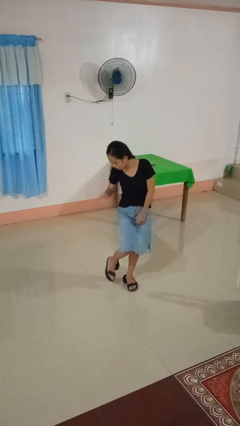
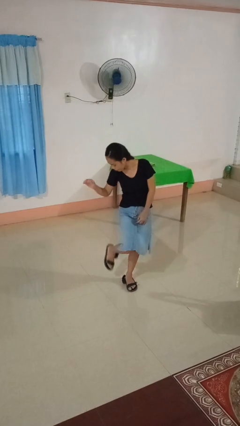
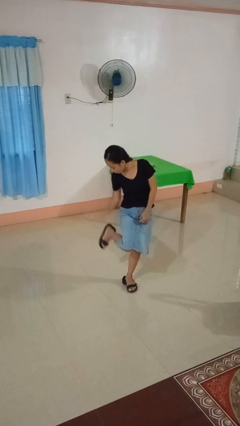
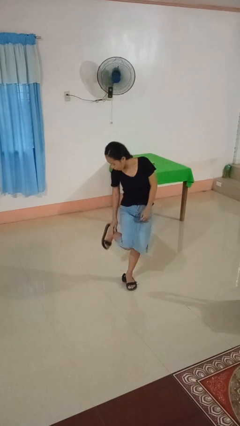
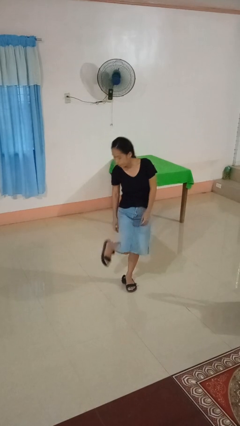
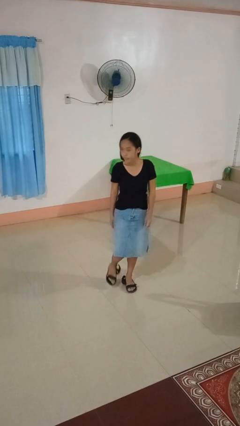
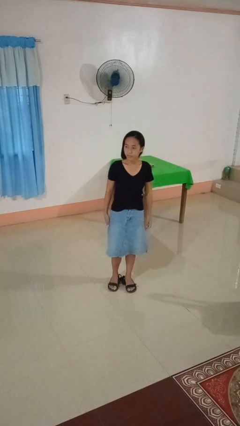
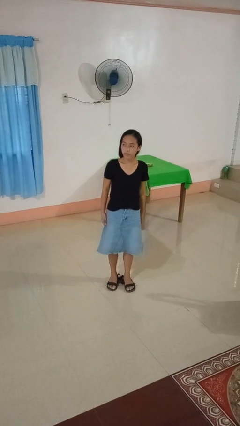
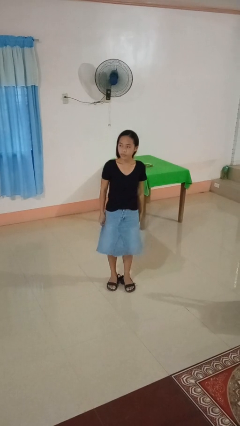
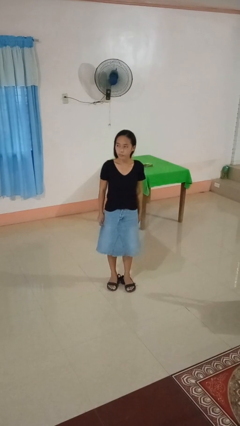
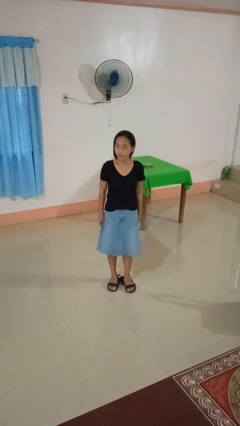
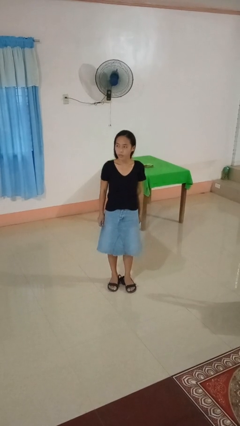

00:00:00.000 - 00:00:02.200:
person swats bug

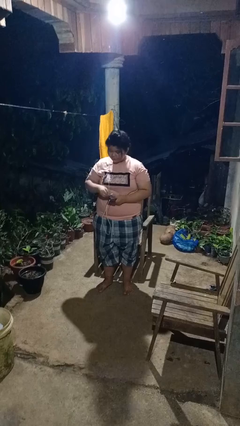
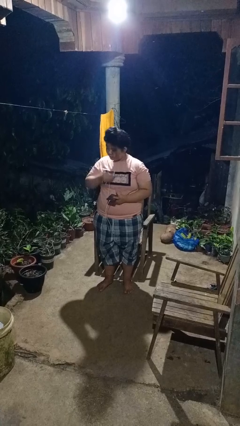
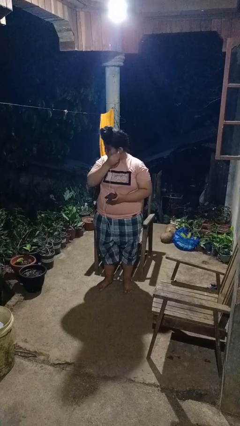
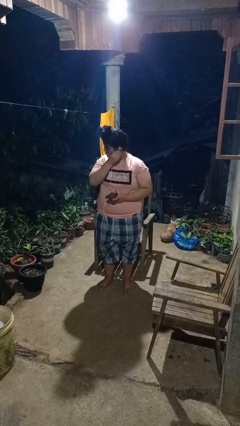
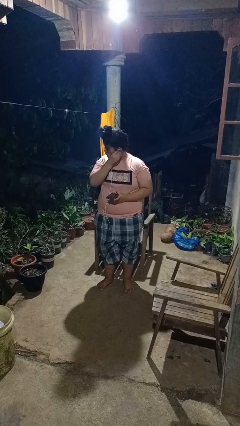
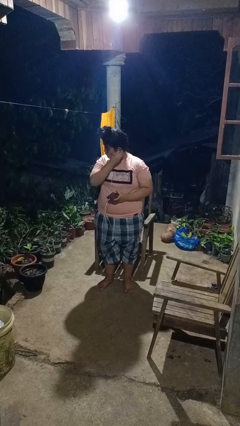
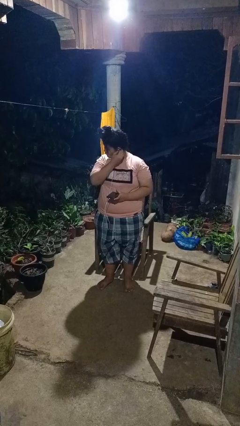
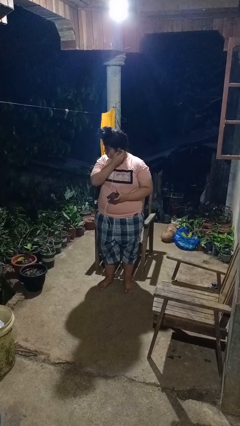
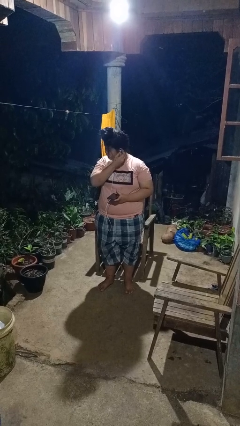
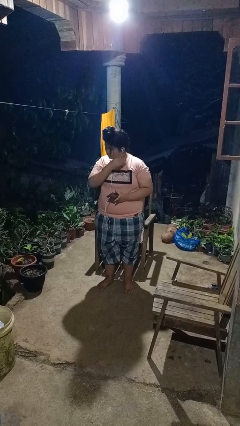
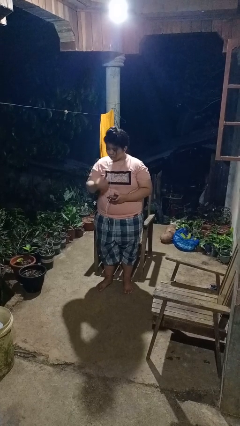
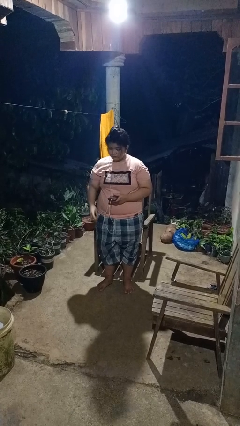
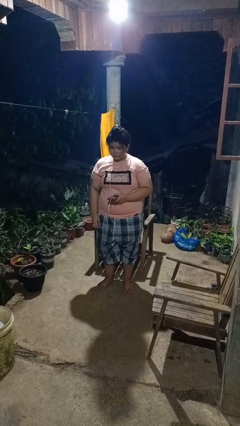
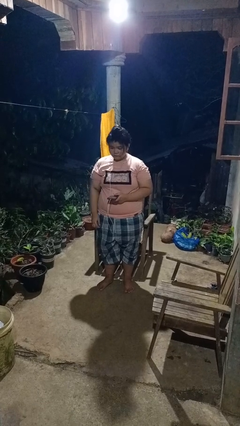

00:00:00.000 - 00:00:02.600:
person puts on headphones

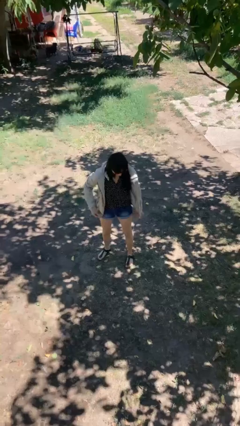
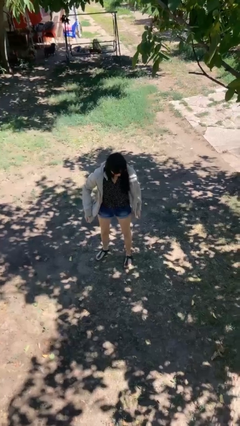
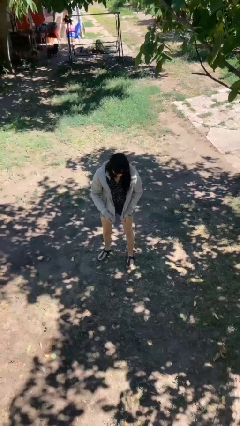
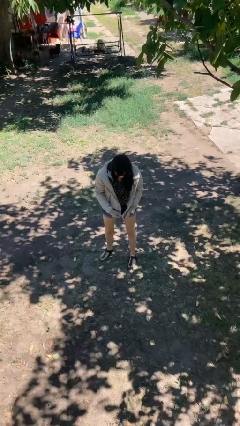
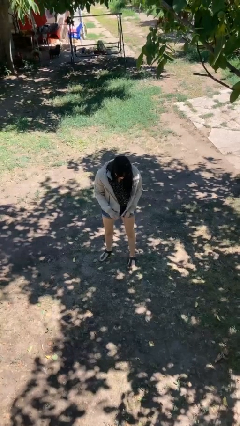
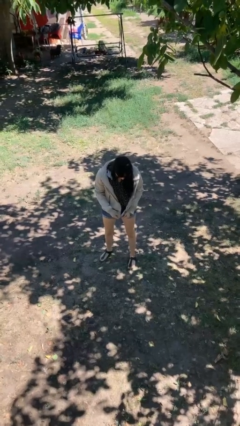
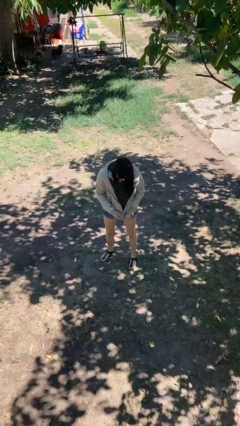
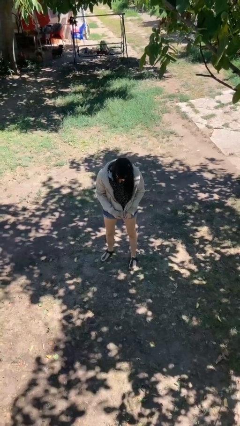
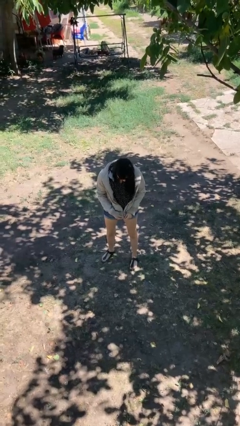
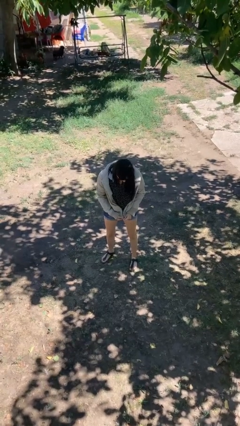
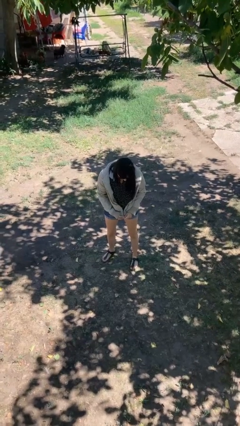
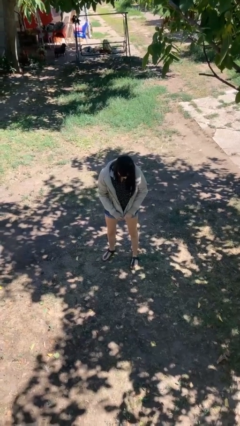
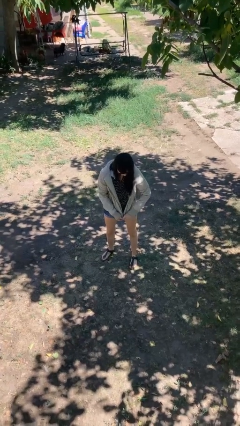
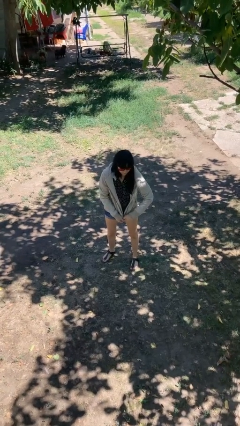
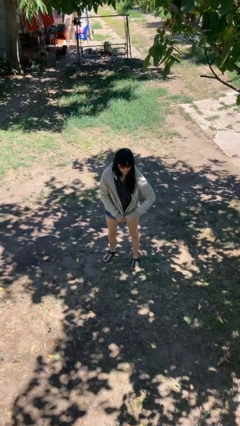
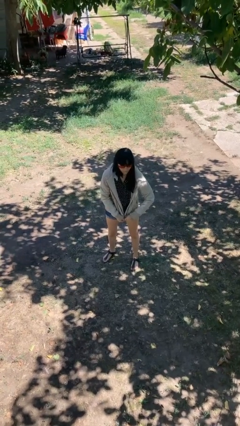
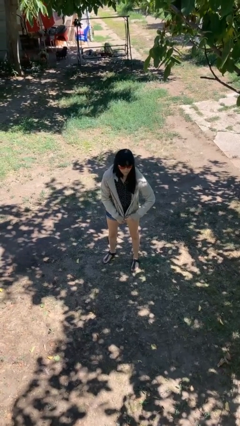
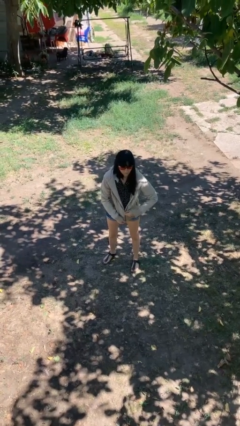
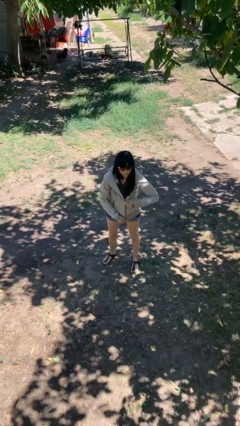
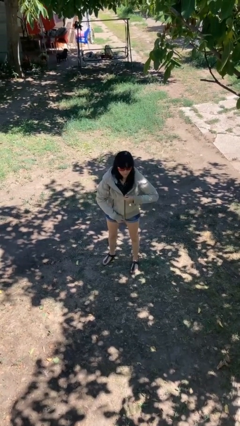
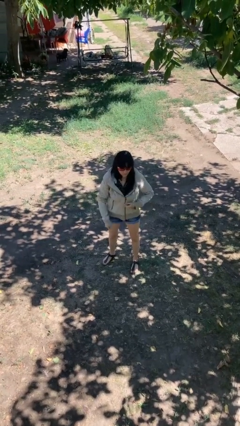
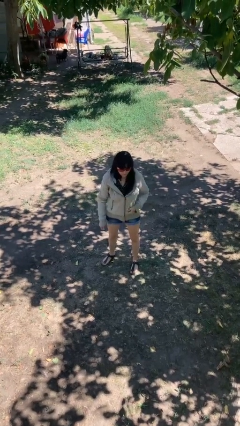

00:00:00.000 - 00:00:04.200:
person zips up jacket

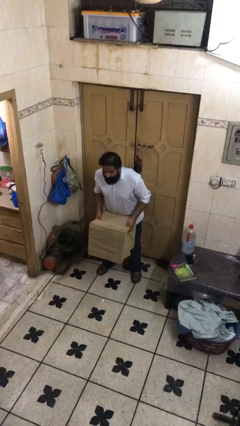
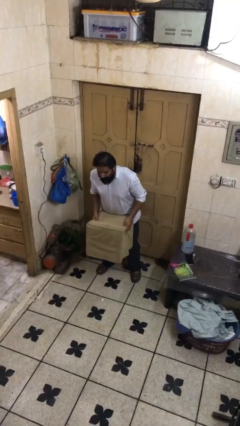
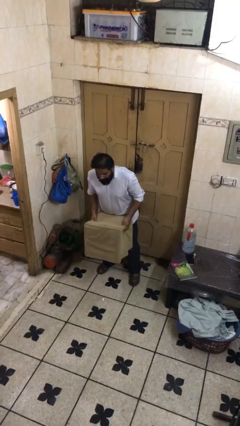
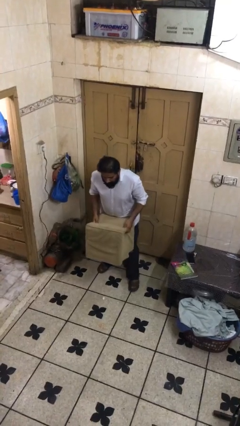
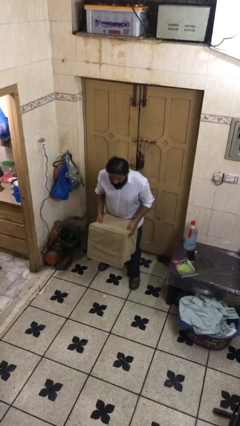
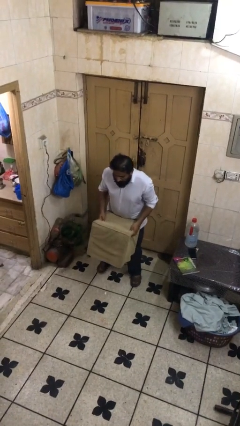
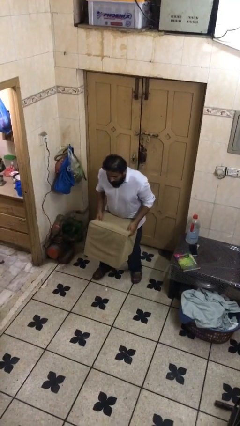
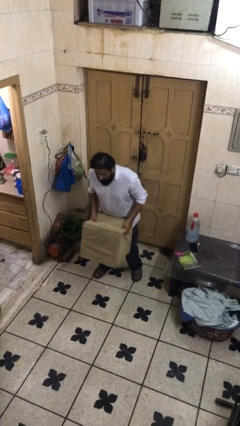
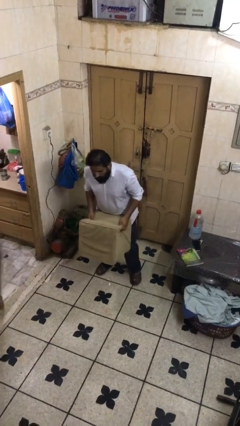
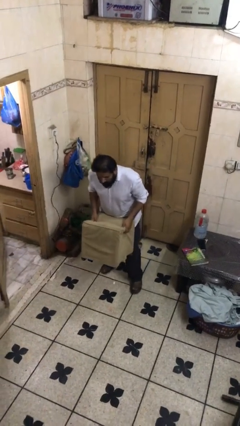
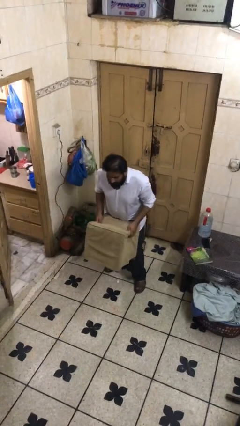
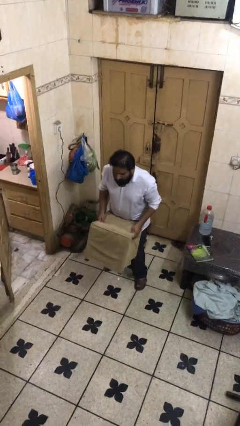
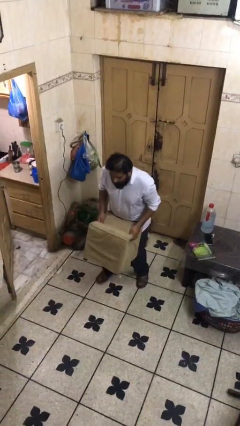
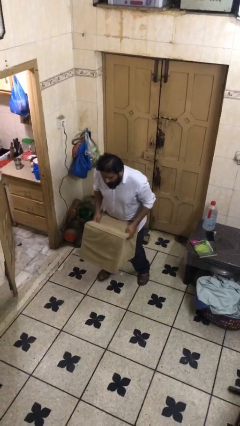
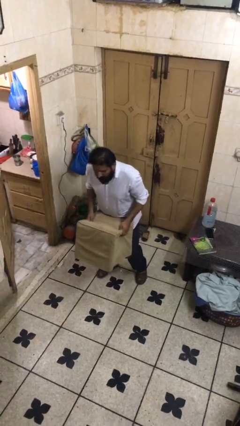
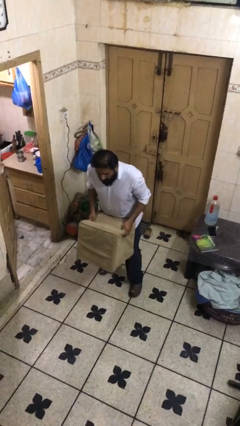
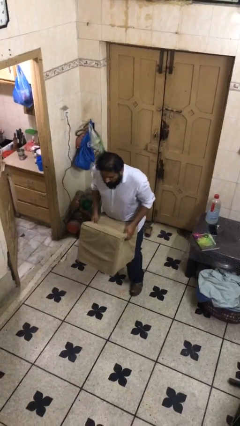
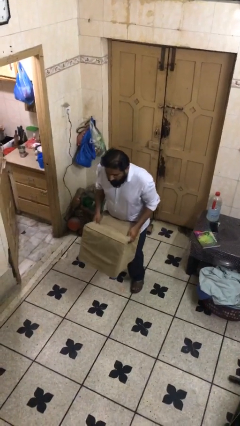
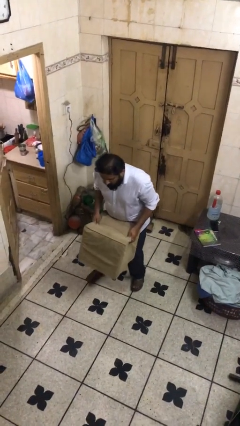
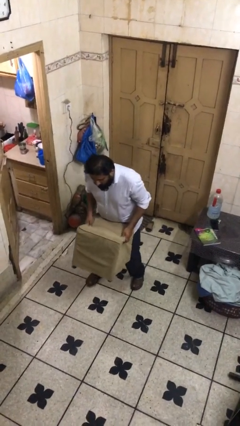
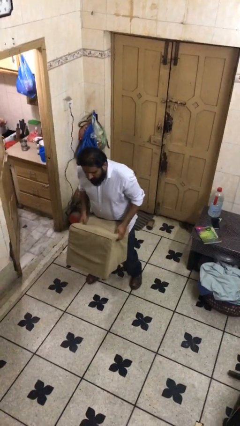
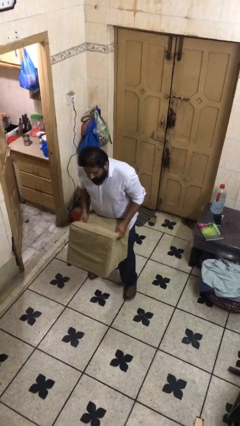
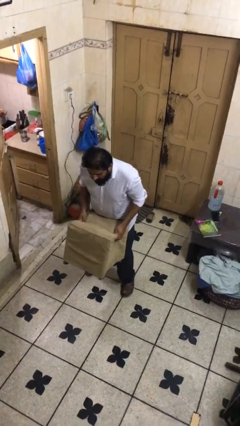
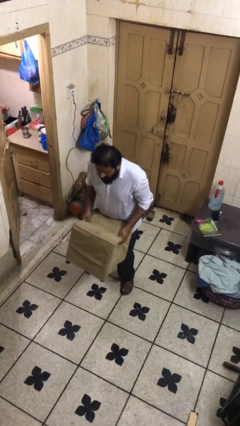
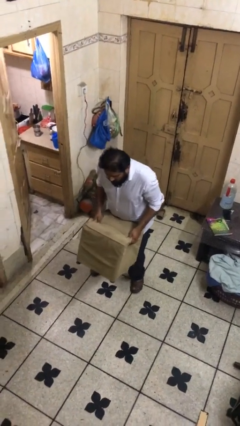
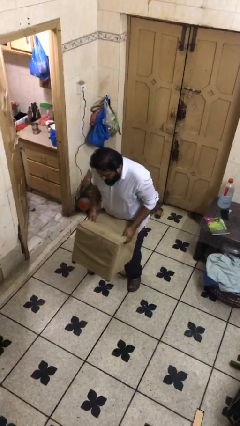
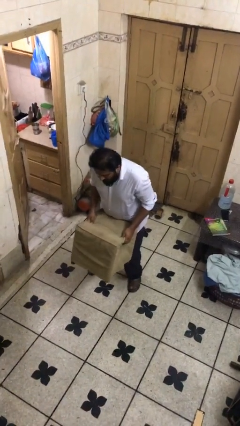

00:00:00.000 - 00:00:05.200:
person carries heavy object

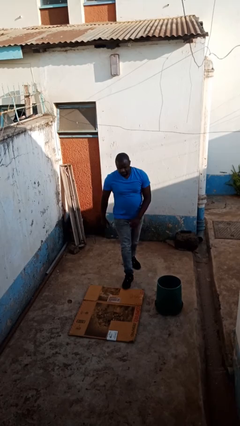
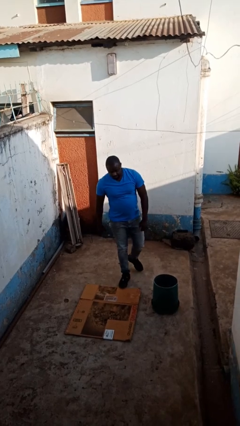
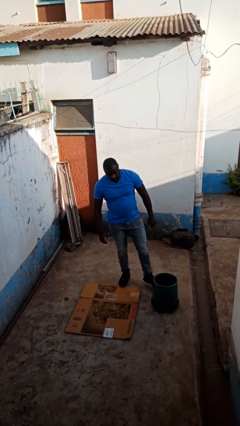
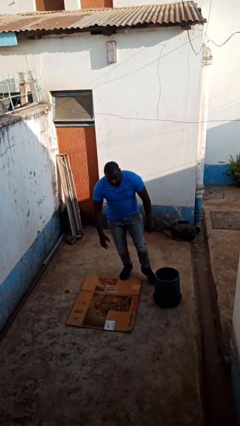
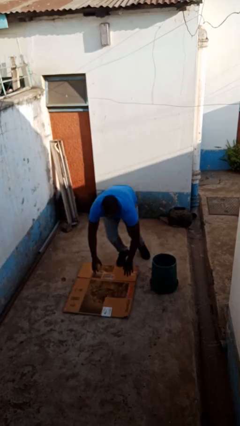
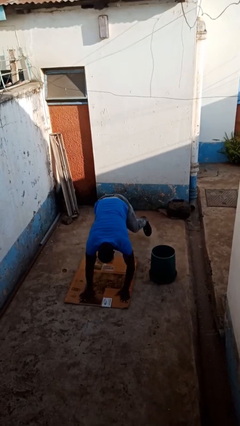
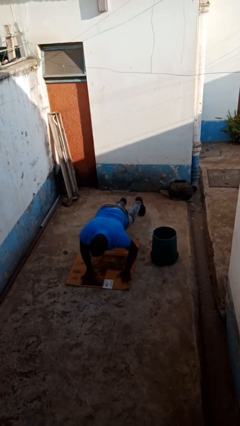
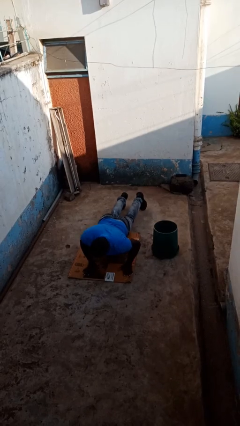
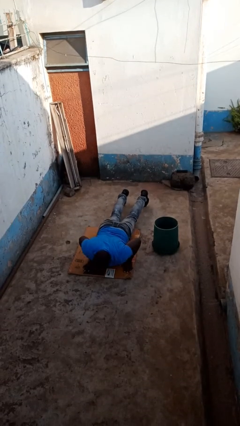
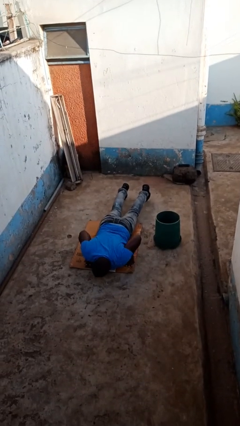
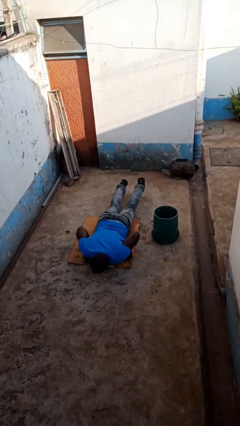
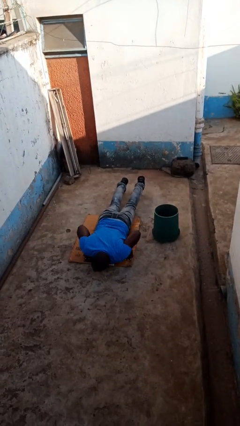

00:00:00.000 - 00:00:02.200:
person trips on object on floor

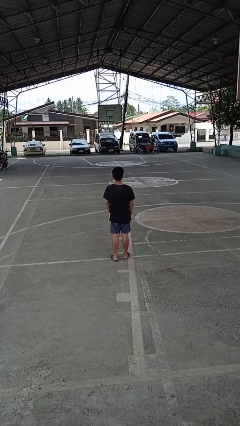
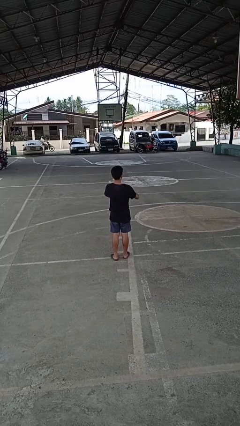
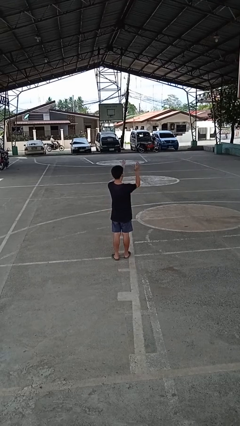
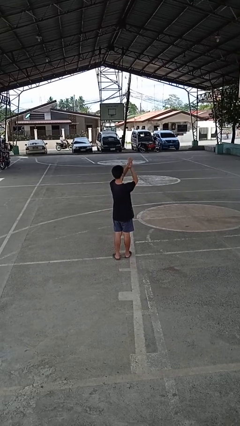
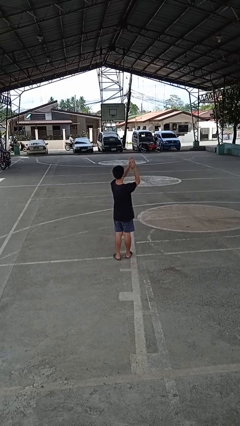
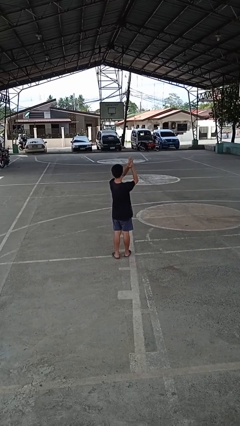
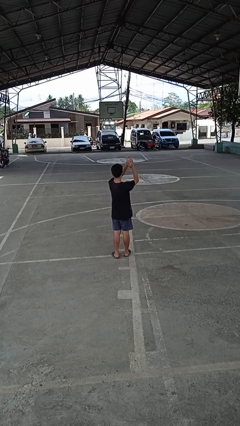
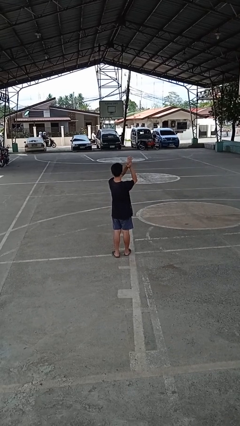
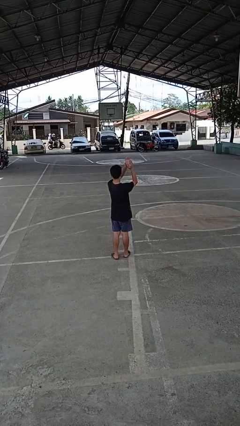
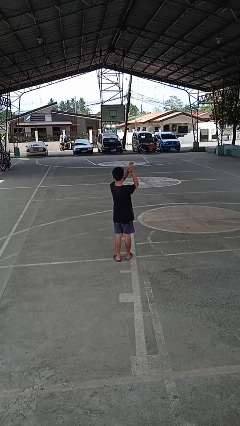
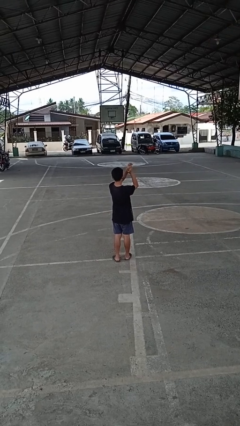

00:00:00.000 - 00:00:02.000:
person claps hands
